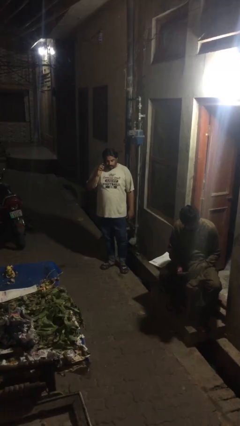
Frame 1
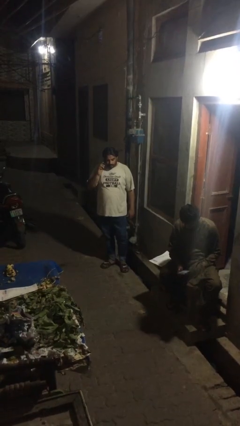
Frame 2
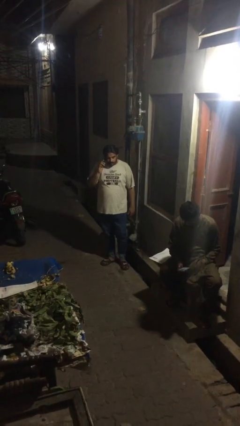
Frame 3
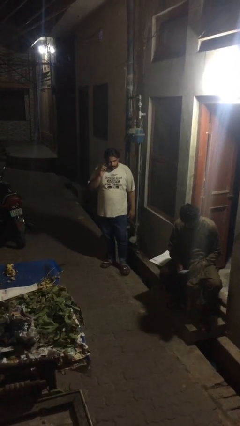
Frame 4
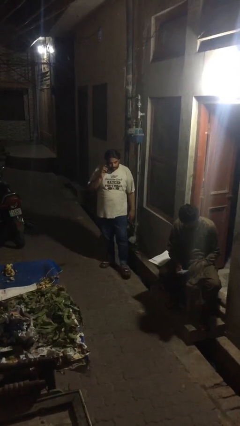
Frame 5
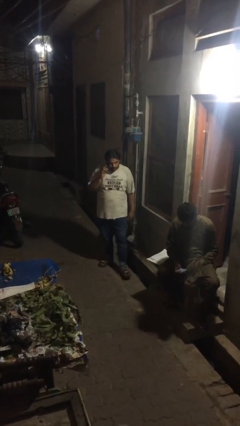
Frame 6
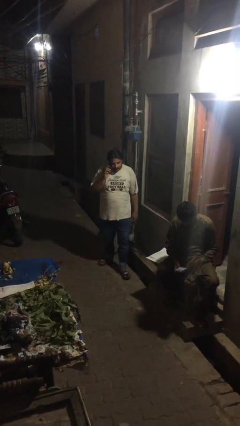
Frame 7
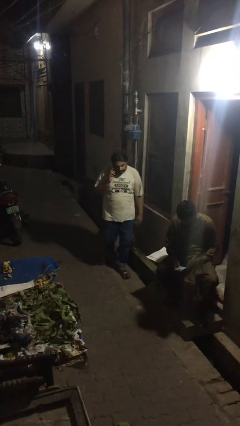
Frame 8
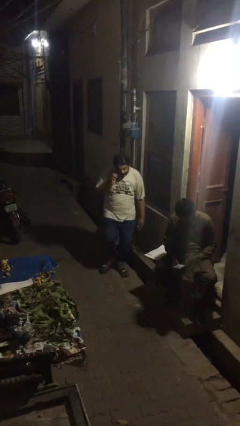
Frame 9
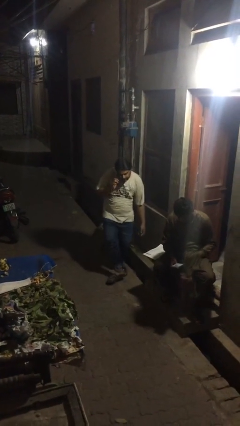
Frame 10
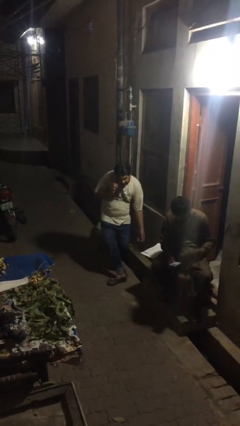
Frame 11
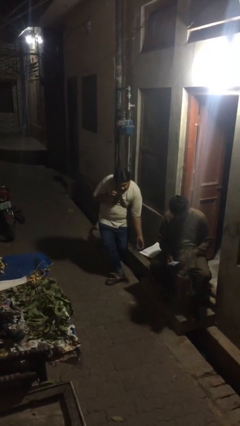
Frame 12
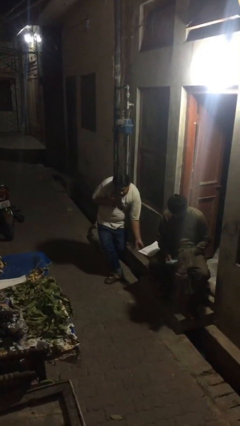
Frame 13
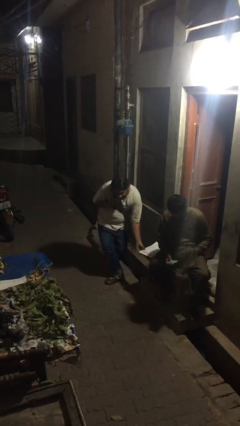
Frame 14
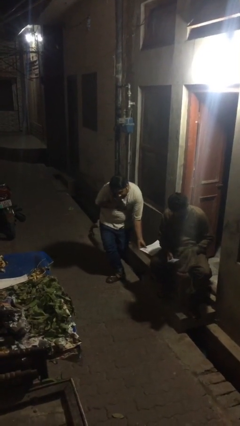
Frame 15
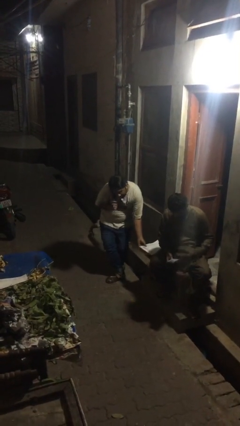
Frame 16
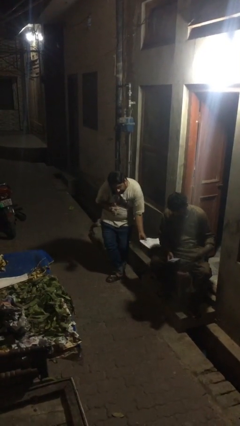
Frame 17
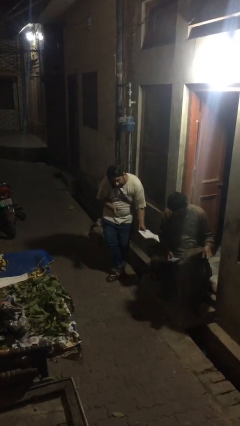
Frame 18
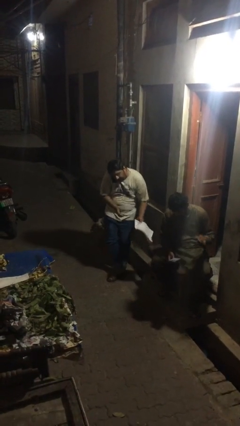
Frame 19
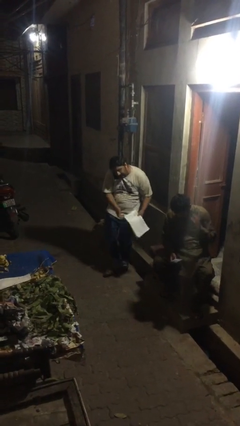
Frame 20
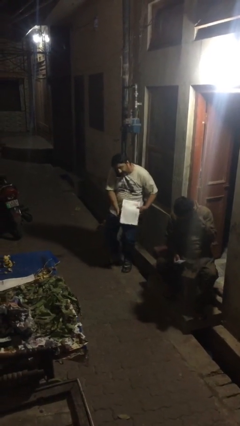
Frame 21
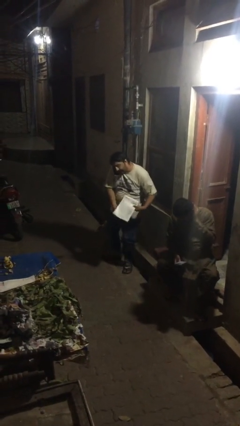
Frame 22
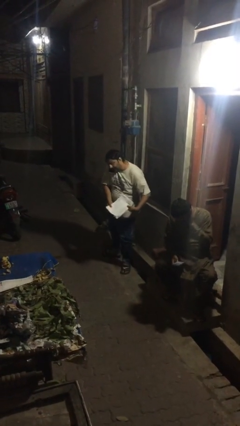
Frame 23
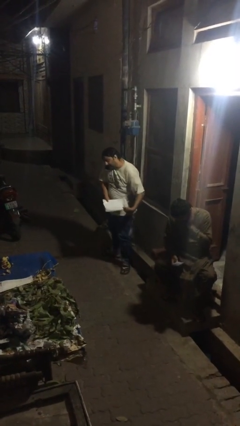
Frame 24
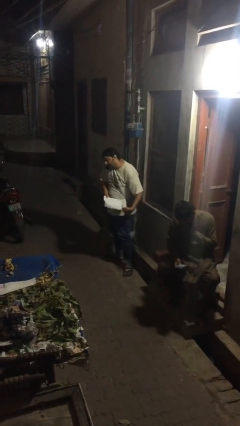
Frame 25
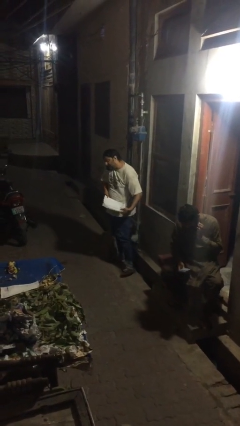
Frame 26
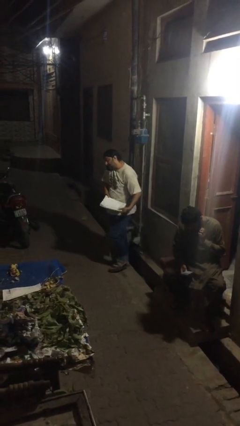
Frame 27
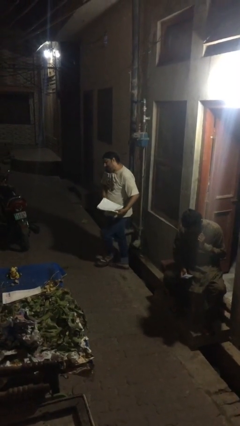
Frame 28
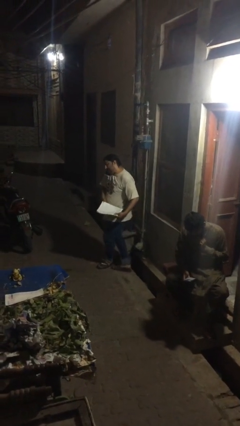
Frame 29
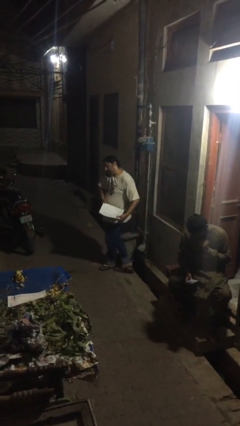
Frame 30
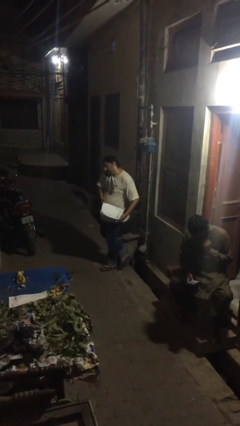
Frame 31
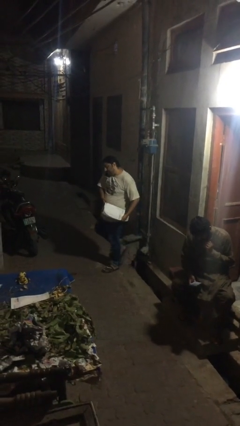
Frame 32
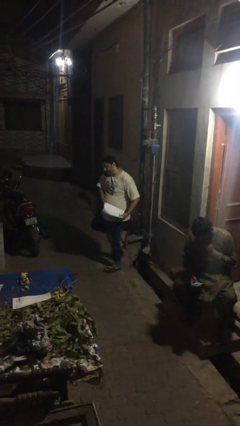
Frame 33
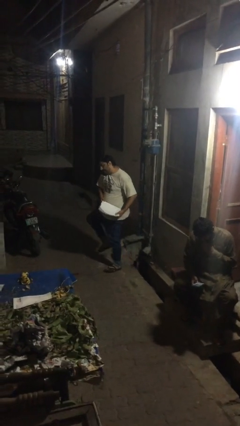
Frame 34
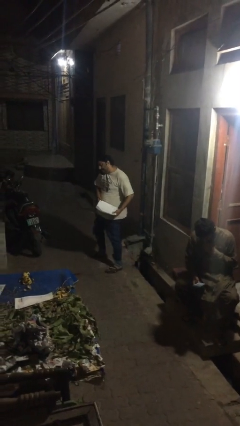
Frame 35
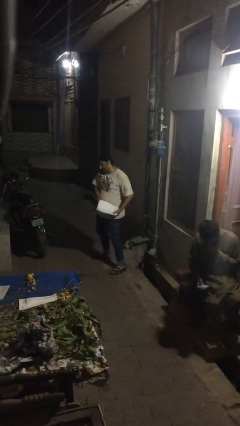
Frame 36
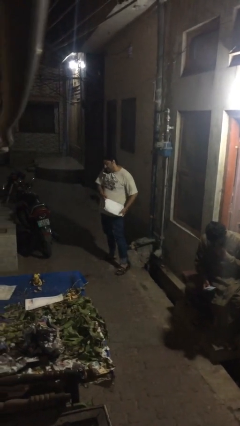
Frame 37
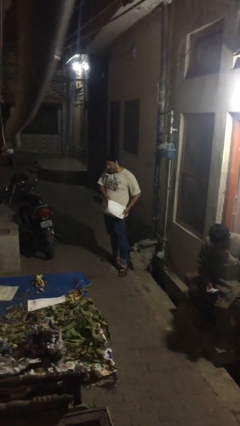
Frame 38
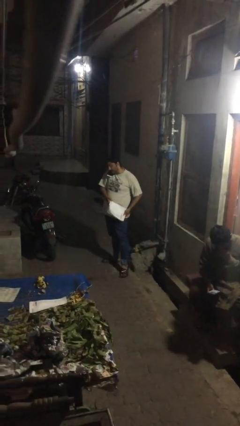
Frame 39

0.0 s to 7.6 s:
person steals object from person

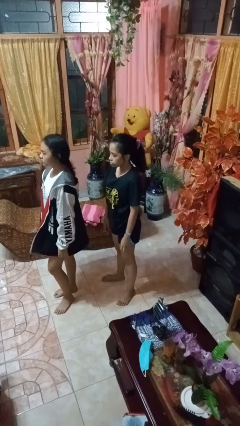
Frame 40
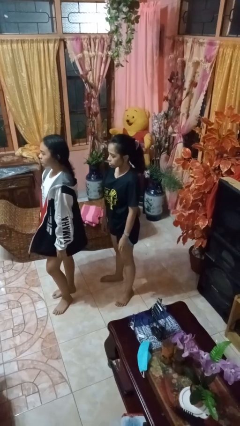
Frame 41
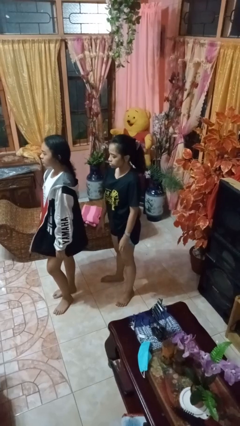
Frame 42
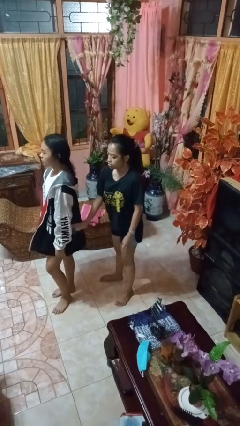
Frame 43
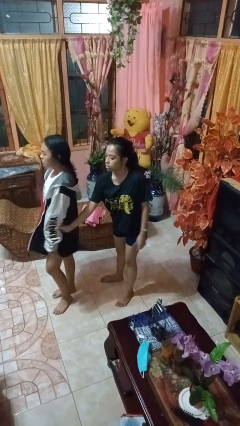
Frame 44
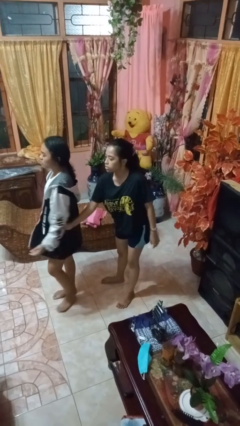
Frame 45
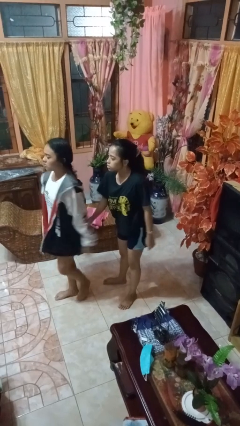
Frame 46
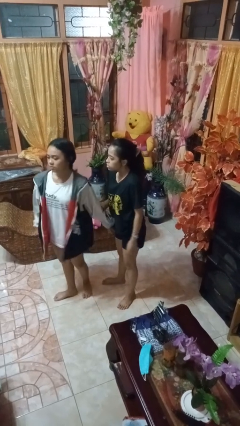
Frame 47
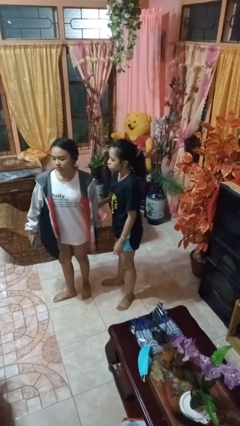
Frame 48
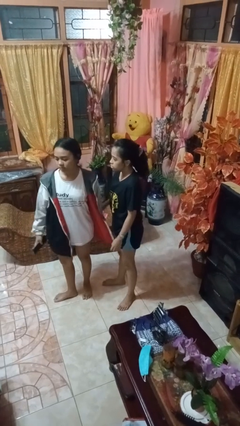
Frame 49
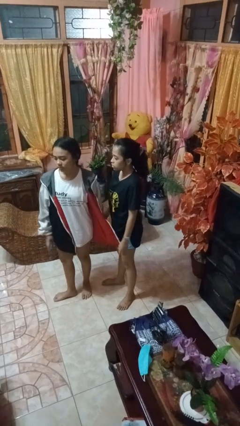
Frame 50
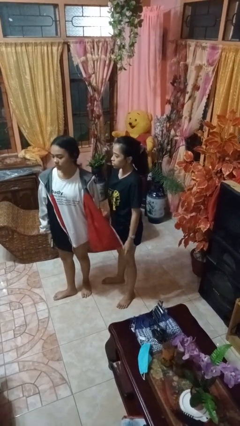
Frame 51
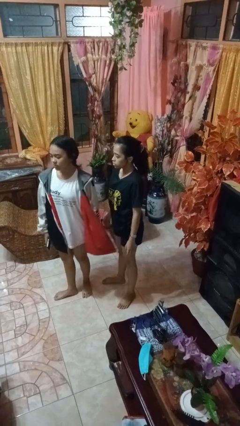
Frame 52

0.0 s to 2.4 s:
person grabs person by forearm

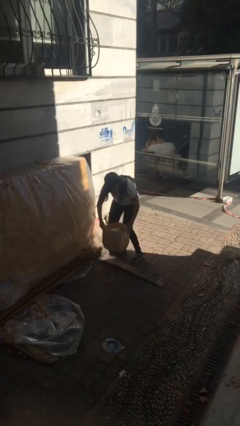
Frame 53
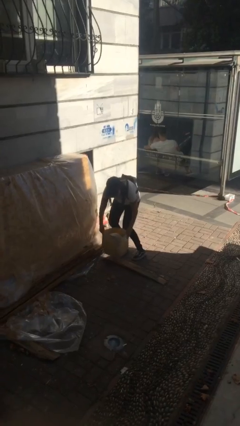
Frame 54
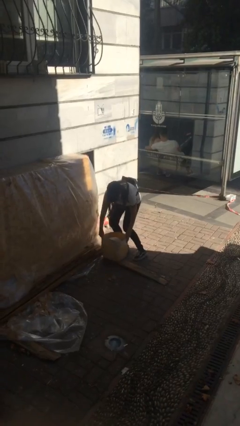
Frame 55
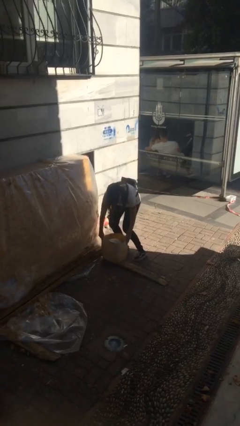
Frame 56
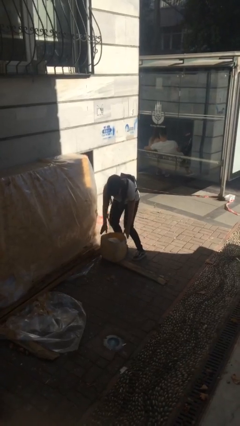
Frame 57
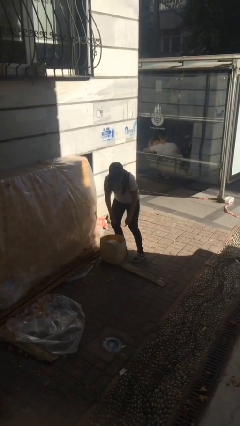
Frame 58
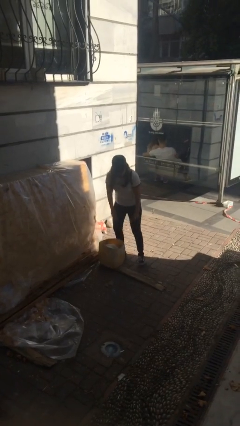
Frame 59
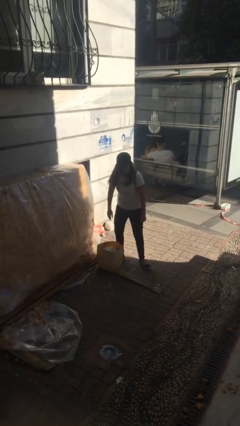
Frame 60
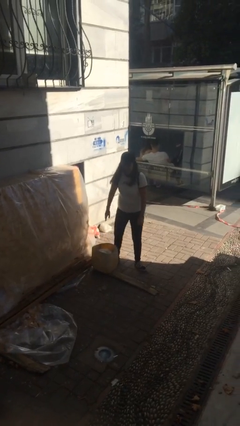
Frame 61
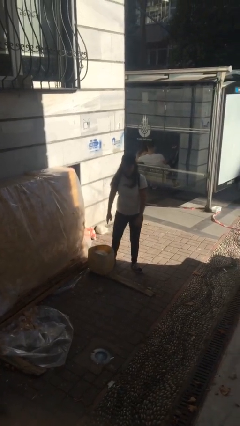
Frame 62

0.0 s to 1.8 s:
person puts down object on floor

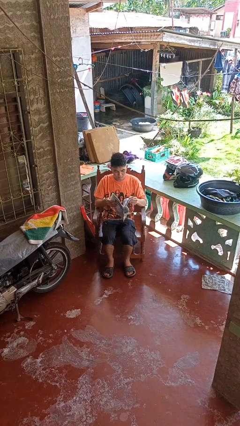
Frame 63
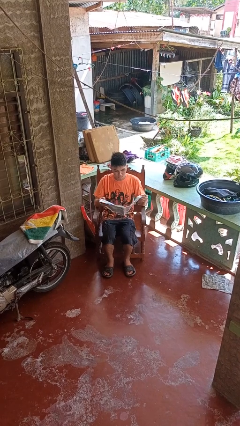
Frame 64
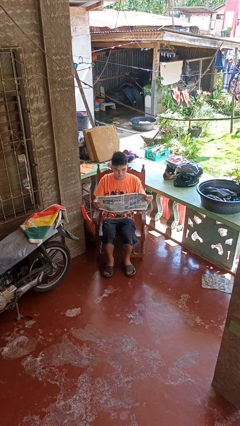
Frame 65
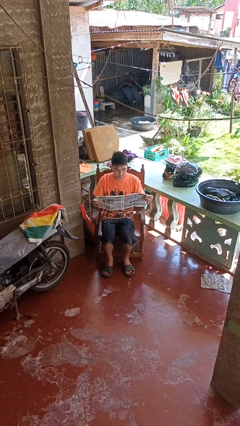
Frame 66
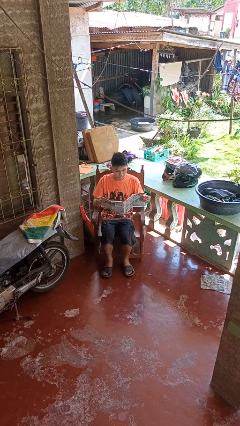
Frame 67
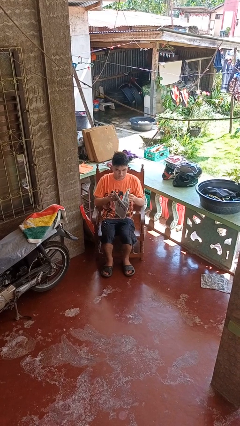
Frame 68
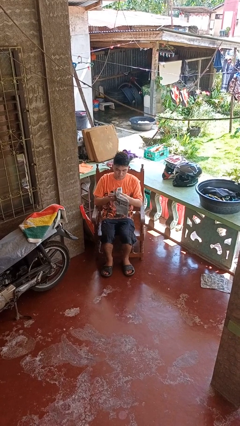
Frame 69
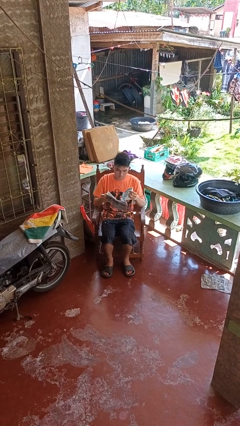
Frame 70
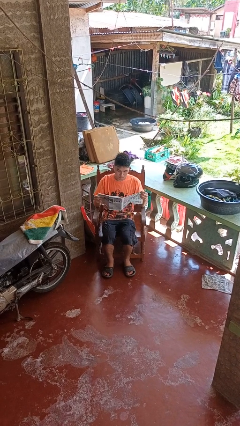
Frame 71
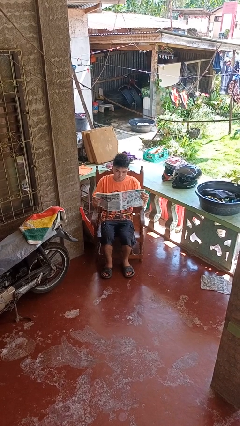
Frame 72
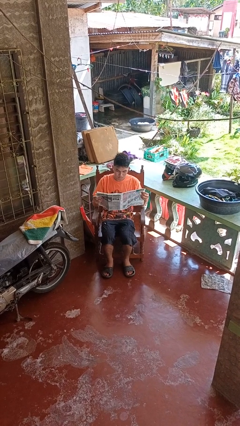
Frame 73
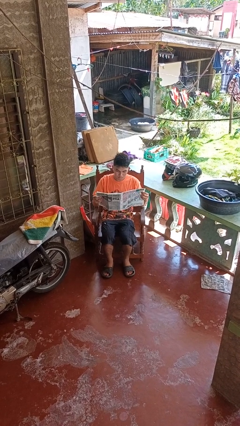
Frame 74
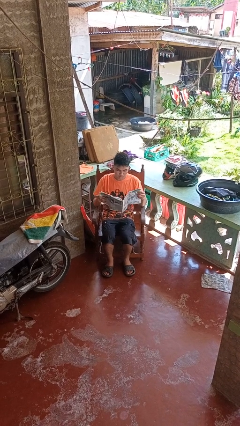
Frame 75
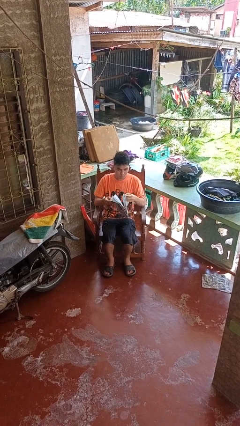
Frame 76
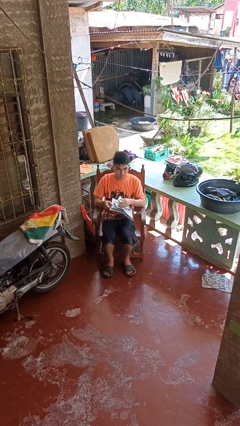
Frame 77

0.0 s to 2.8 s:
person reads newspaper

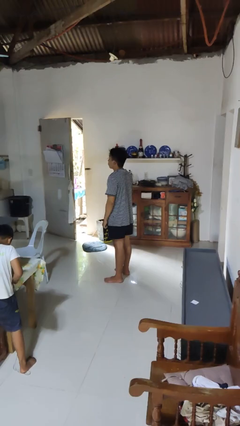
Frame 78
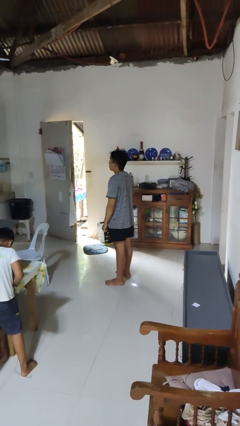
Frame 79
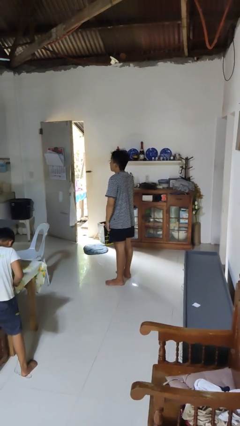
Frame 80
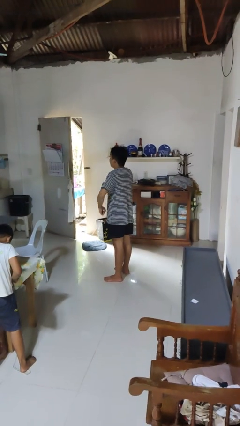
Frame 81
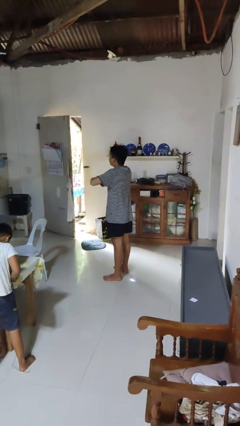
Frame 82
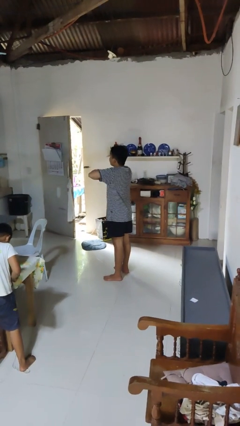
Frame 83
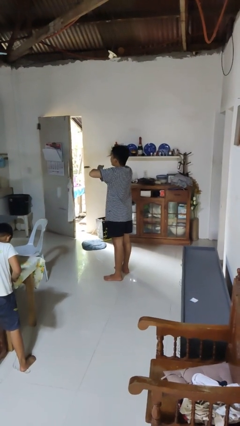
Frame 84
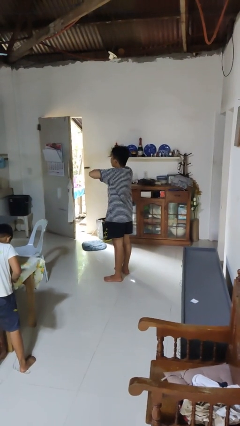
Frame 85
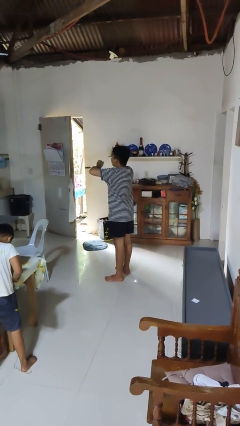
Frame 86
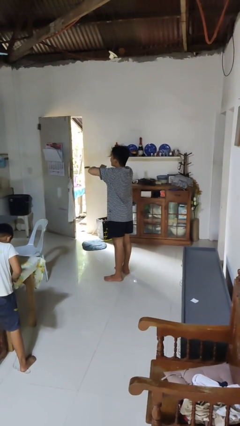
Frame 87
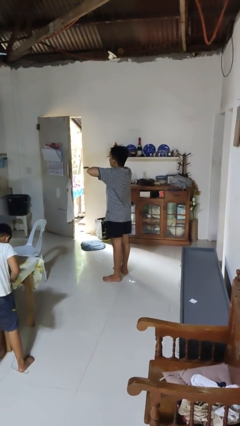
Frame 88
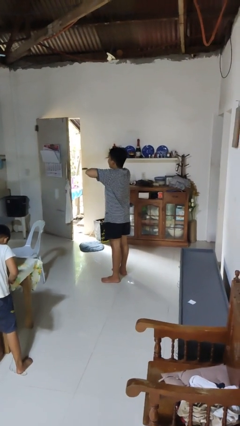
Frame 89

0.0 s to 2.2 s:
person drums on chest

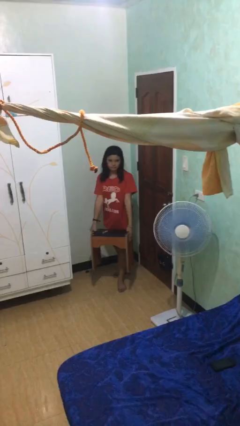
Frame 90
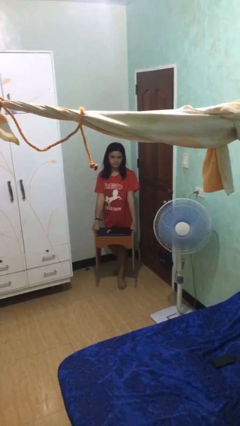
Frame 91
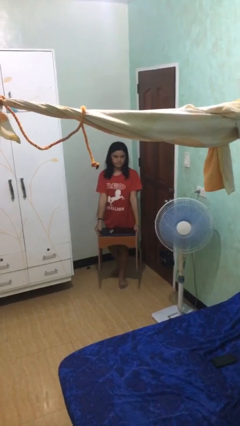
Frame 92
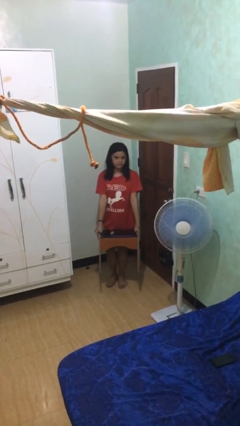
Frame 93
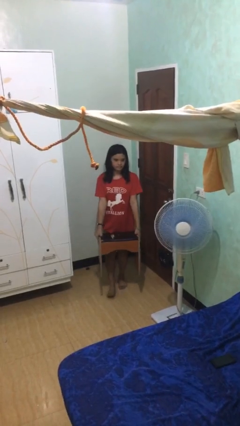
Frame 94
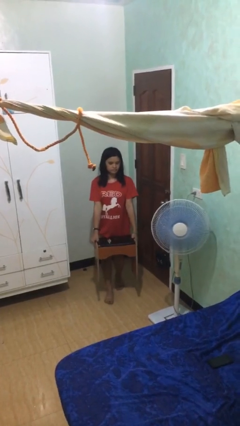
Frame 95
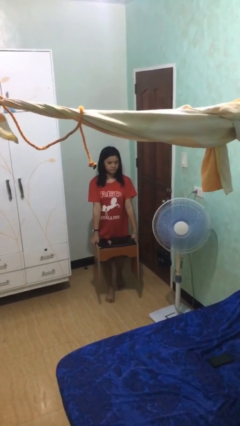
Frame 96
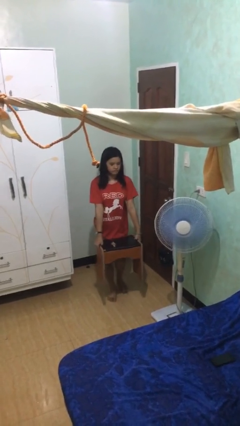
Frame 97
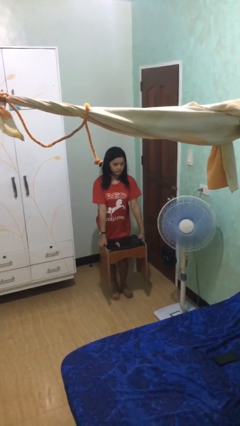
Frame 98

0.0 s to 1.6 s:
person carries heavy object
